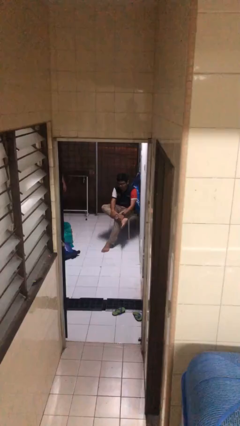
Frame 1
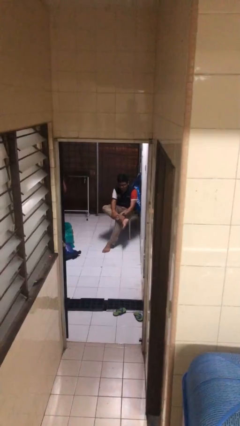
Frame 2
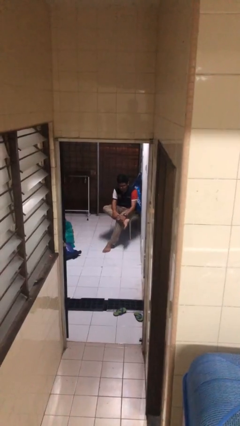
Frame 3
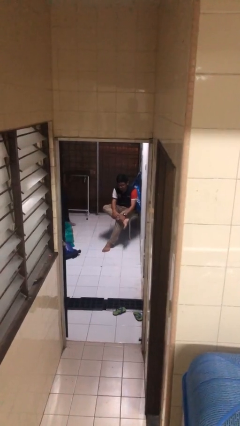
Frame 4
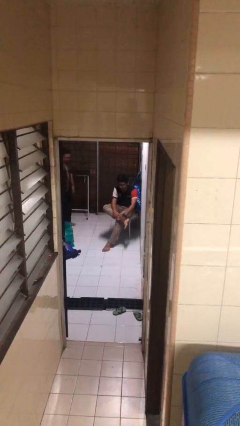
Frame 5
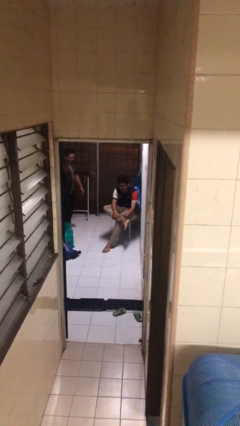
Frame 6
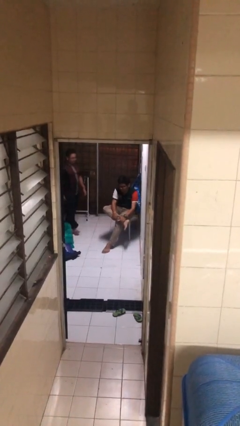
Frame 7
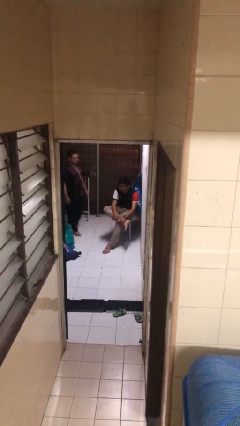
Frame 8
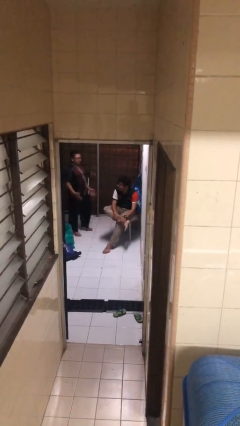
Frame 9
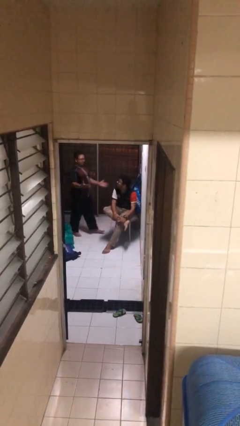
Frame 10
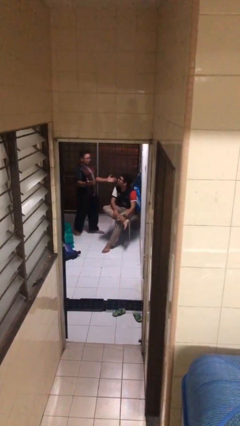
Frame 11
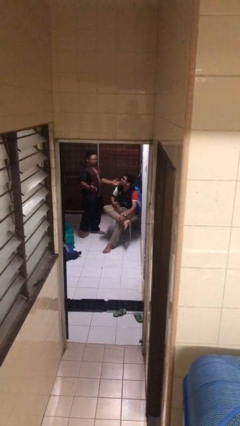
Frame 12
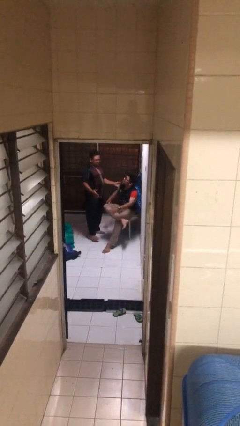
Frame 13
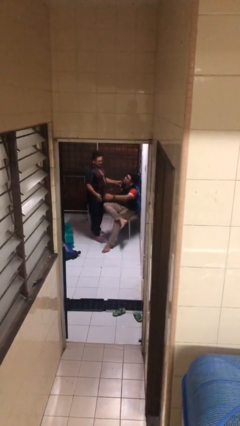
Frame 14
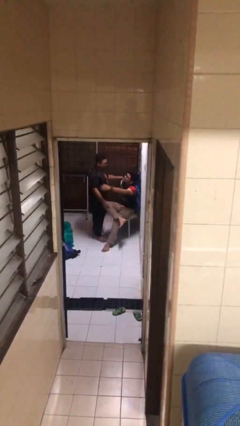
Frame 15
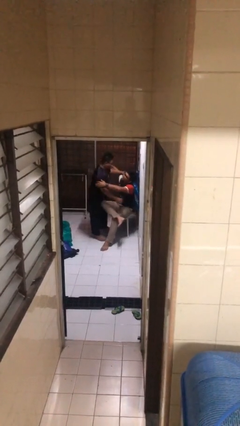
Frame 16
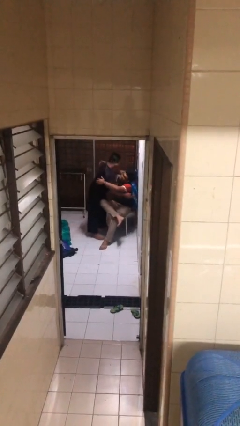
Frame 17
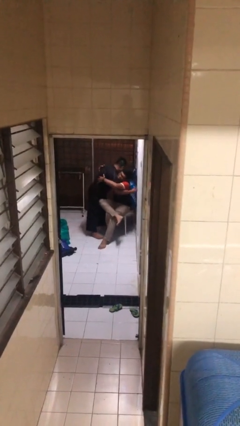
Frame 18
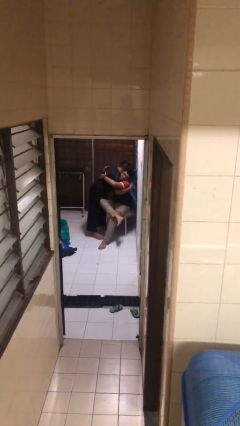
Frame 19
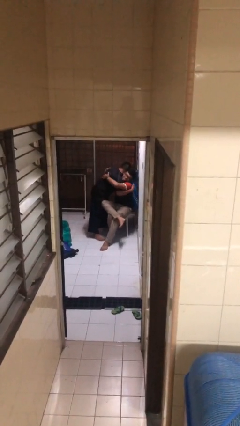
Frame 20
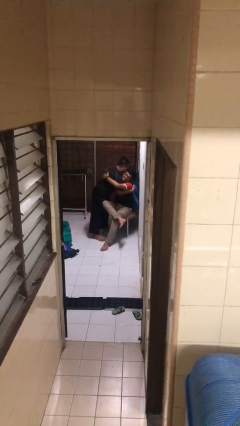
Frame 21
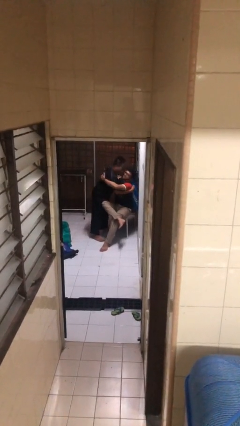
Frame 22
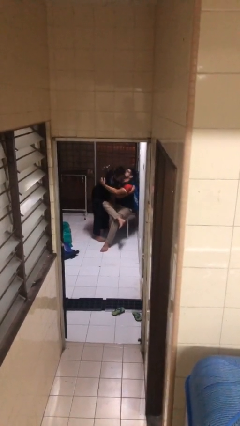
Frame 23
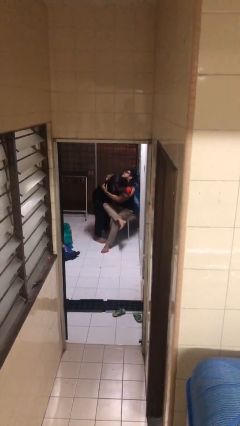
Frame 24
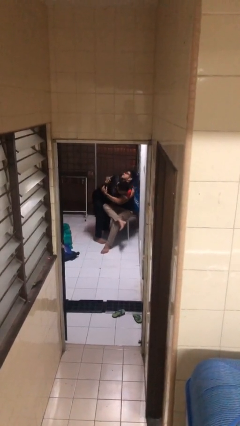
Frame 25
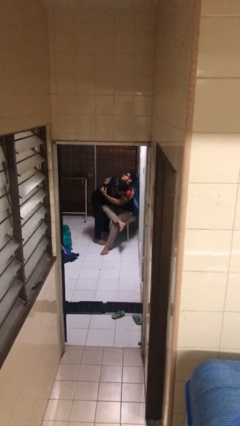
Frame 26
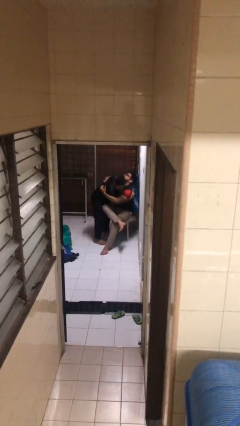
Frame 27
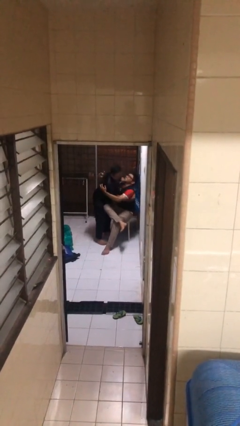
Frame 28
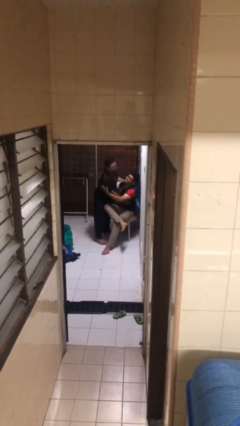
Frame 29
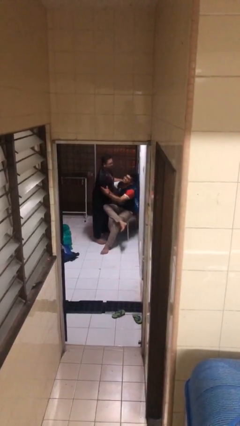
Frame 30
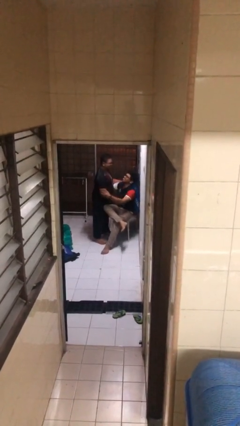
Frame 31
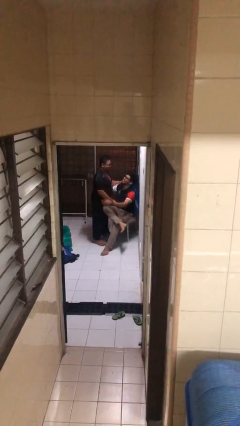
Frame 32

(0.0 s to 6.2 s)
person embraces person

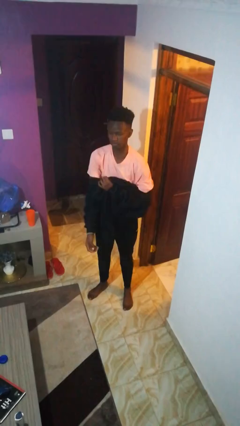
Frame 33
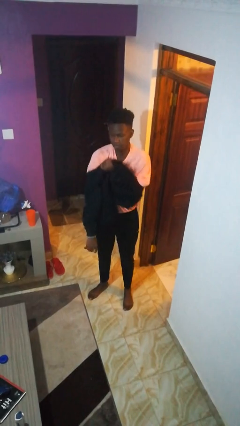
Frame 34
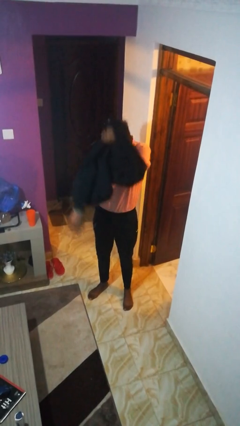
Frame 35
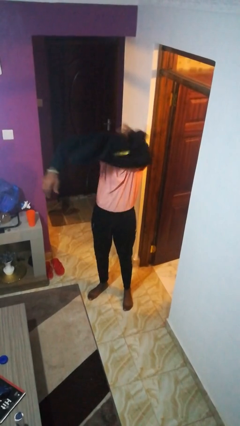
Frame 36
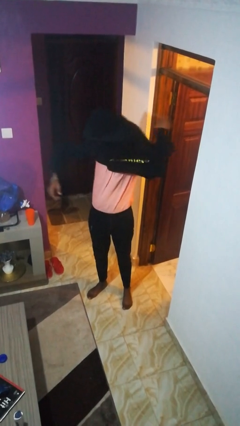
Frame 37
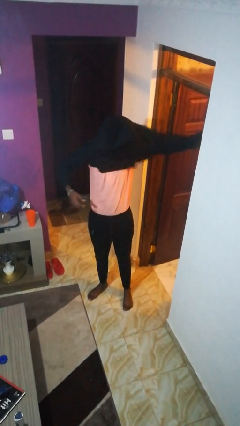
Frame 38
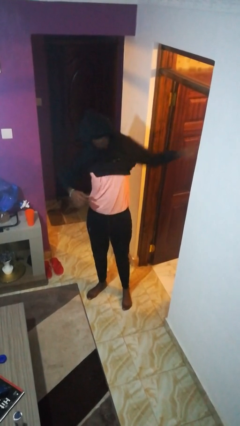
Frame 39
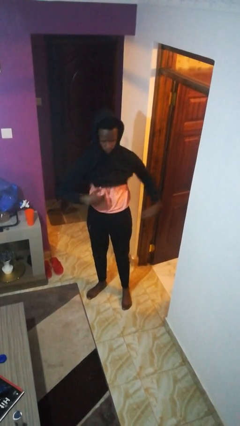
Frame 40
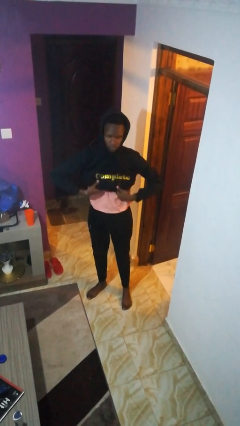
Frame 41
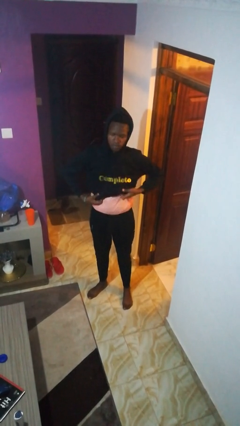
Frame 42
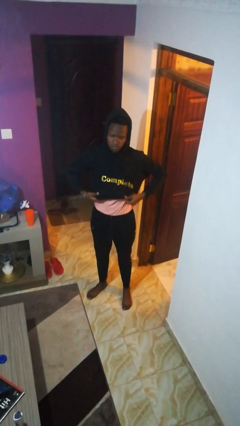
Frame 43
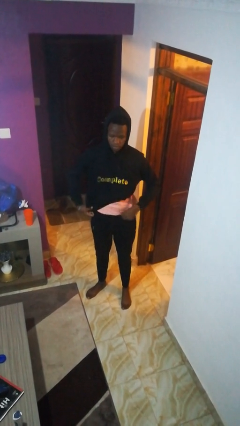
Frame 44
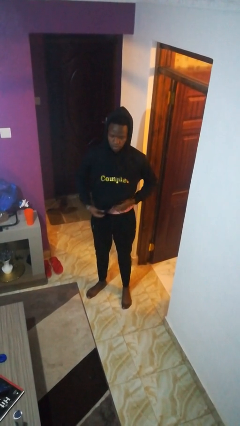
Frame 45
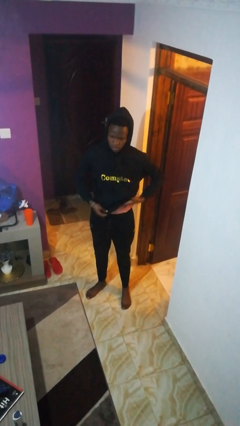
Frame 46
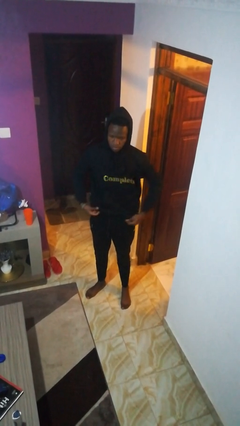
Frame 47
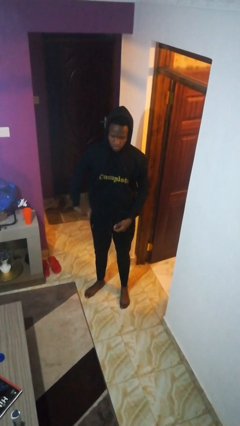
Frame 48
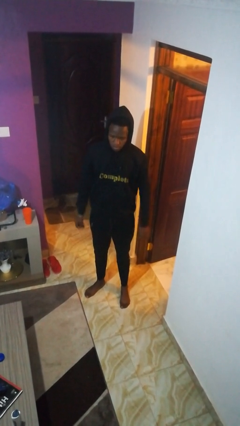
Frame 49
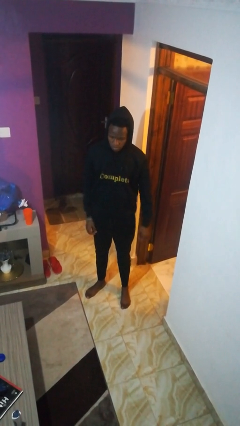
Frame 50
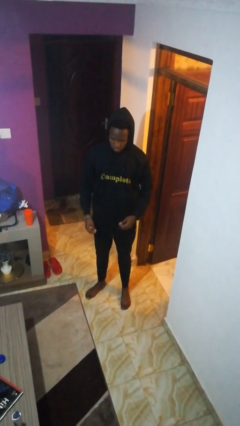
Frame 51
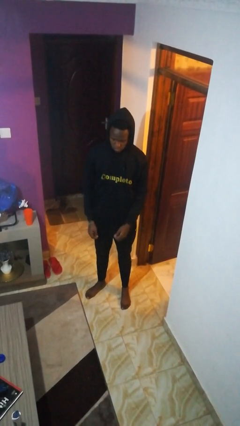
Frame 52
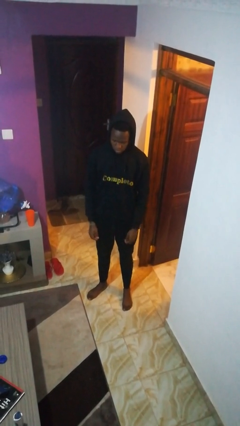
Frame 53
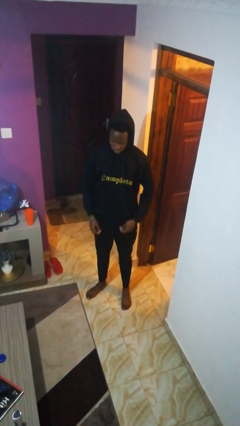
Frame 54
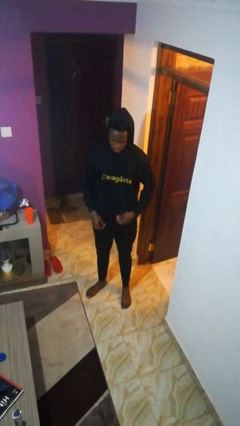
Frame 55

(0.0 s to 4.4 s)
person puts on hoodie

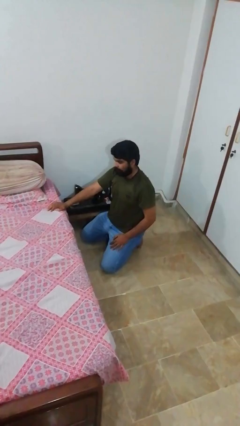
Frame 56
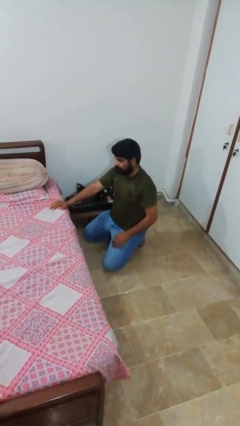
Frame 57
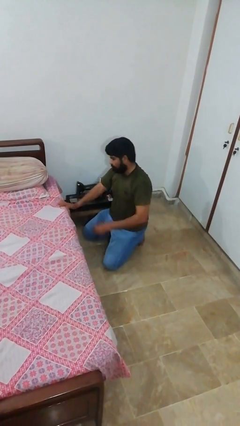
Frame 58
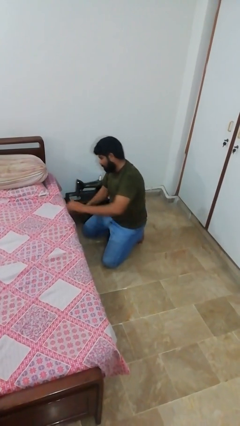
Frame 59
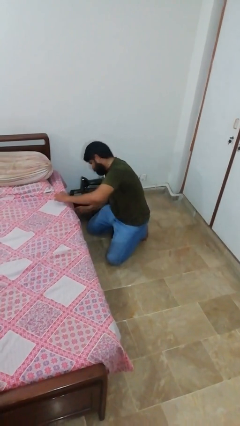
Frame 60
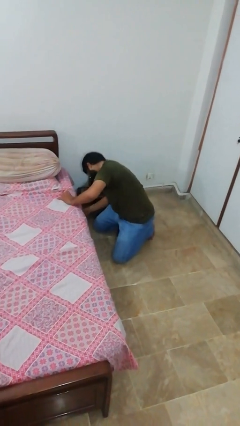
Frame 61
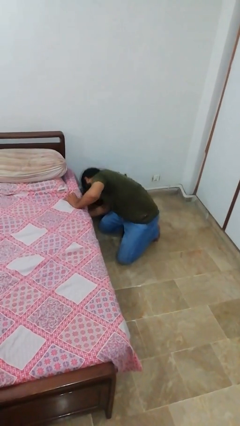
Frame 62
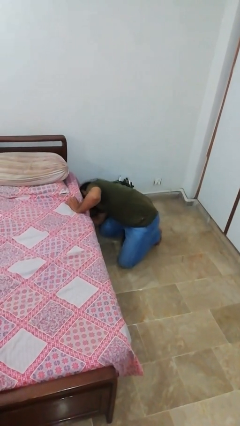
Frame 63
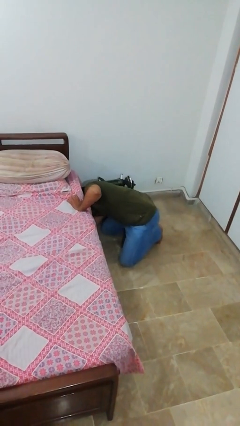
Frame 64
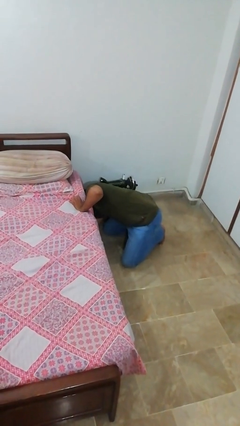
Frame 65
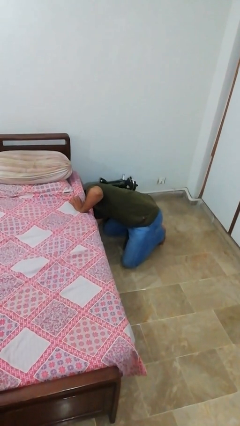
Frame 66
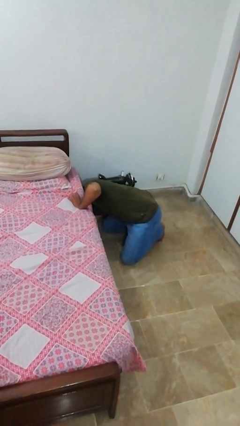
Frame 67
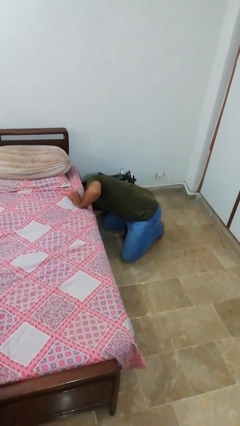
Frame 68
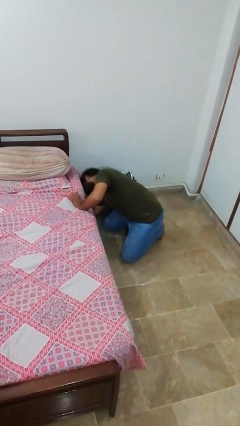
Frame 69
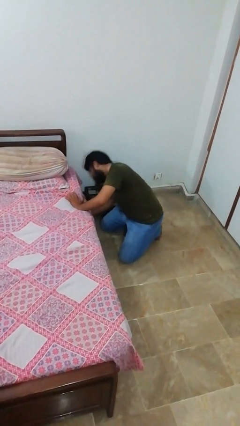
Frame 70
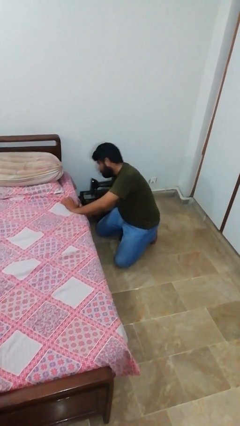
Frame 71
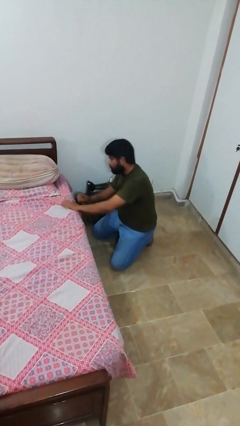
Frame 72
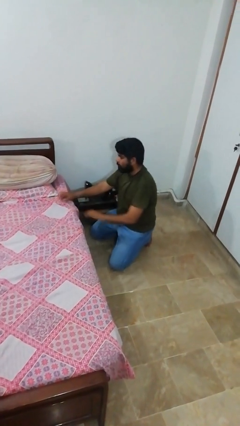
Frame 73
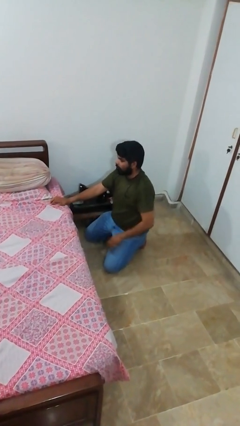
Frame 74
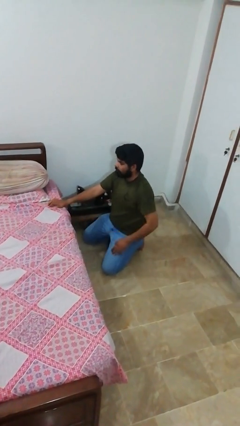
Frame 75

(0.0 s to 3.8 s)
person searches under bed

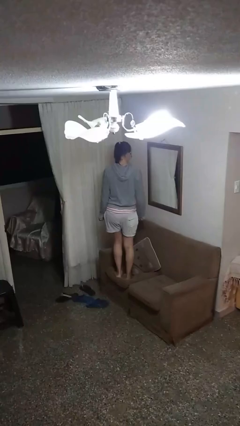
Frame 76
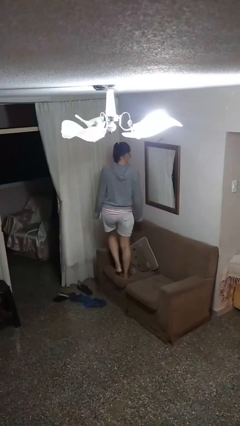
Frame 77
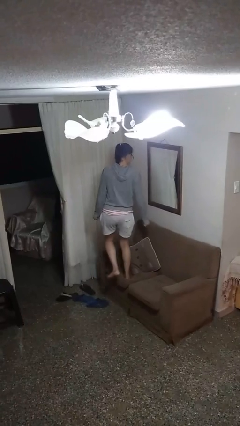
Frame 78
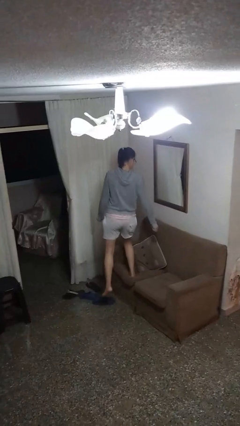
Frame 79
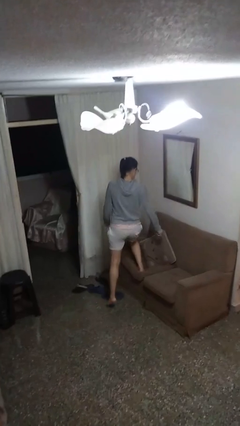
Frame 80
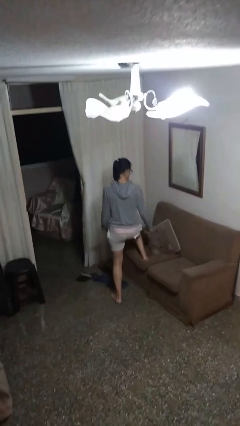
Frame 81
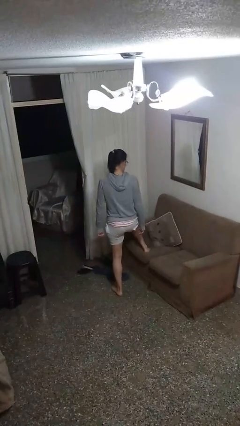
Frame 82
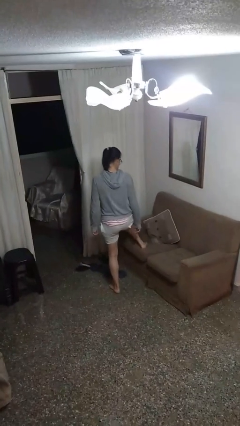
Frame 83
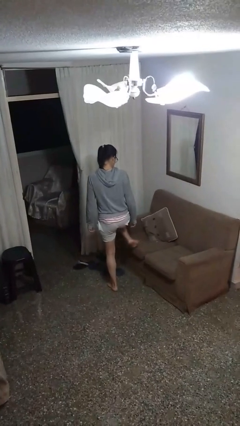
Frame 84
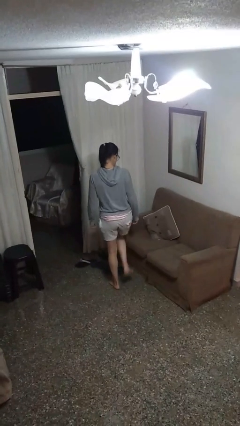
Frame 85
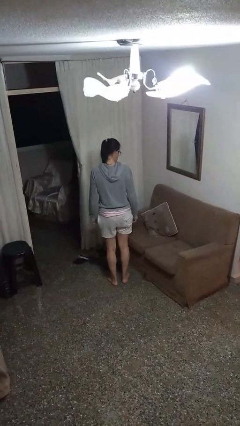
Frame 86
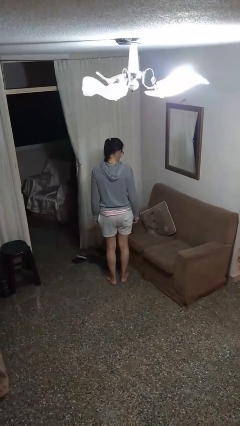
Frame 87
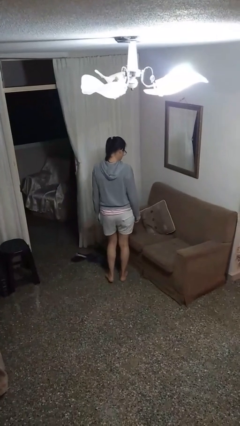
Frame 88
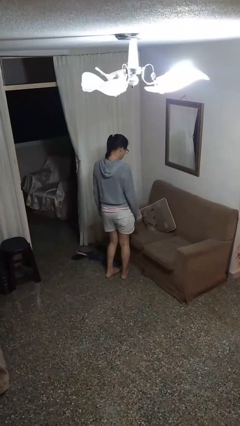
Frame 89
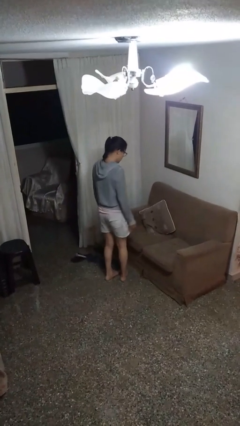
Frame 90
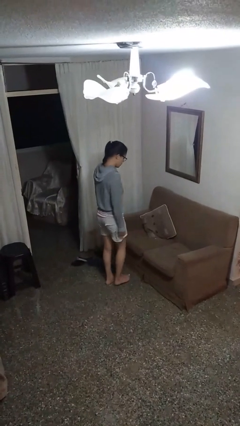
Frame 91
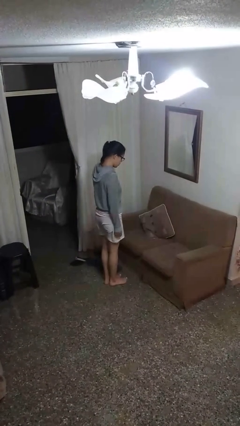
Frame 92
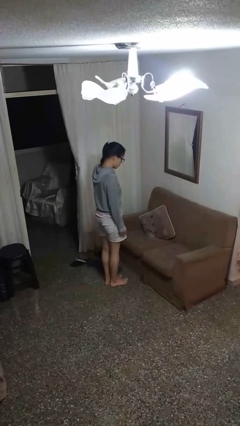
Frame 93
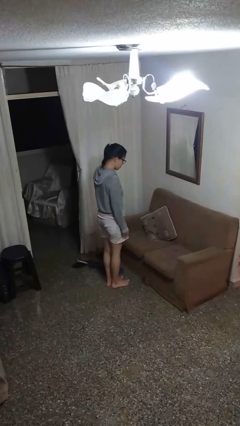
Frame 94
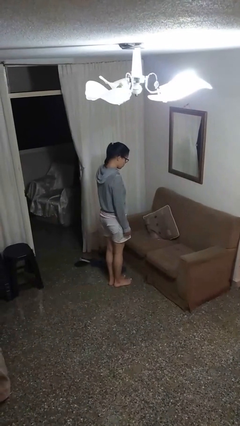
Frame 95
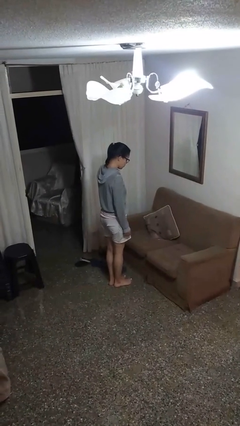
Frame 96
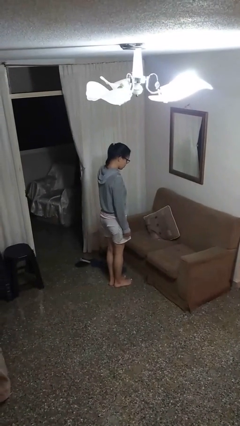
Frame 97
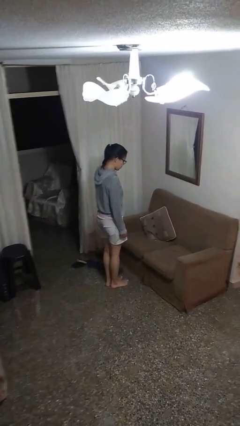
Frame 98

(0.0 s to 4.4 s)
person climbs off couch
